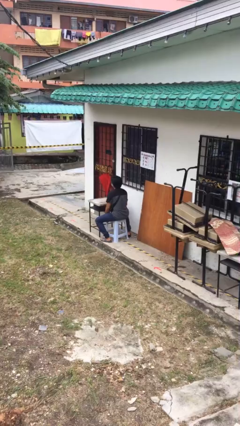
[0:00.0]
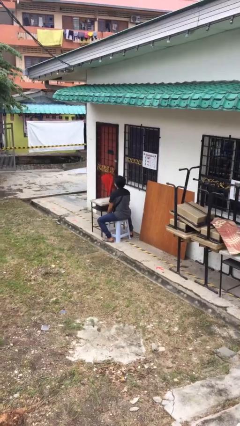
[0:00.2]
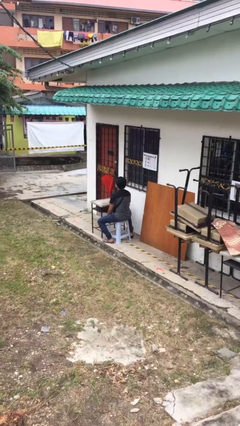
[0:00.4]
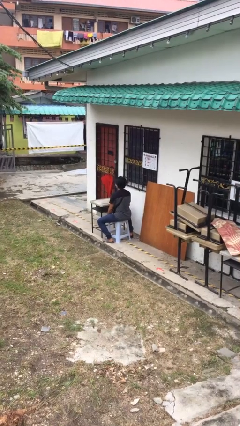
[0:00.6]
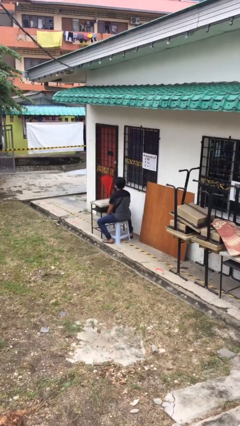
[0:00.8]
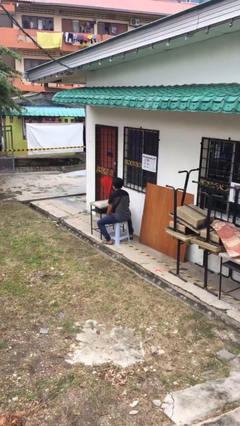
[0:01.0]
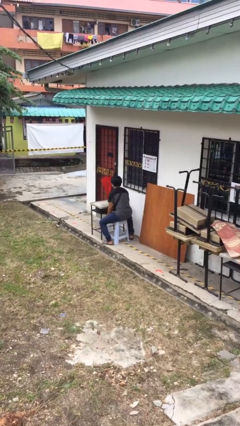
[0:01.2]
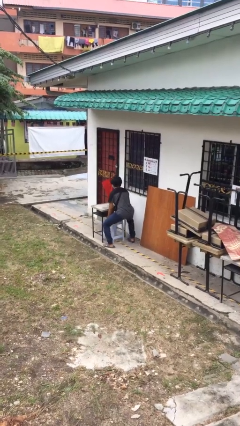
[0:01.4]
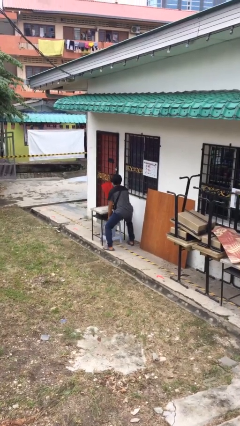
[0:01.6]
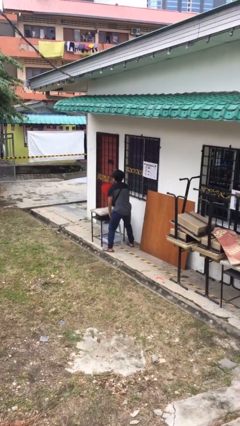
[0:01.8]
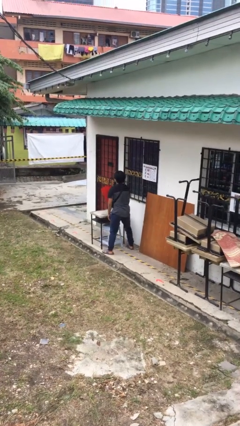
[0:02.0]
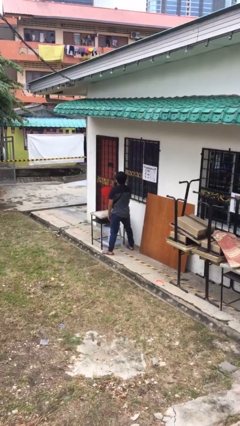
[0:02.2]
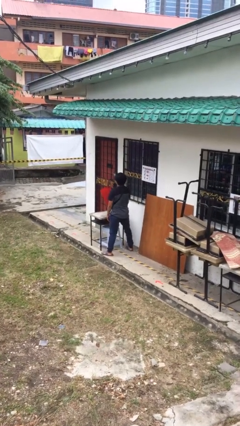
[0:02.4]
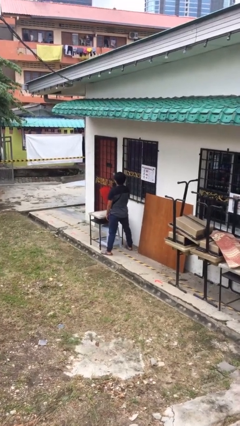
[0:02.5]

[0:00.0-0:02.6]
person stands up

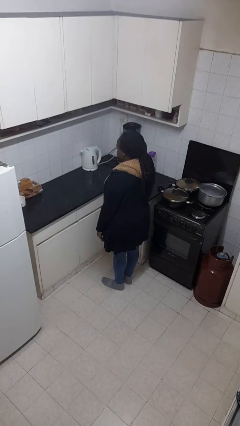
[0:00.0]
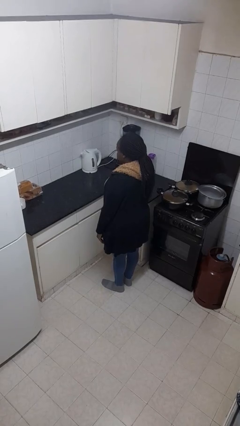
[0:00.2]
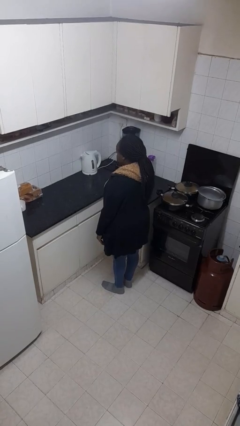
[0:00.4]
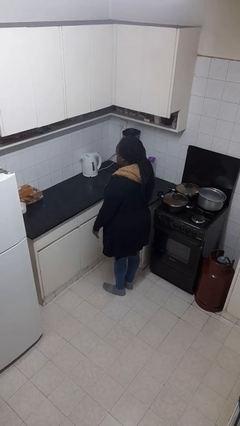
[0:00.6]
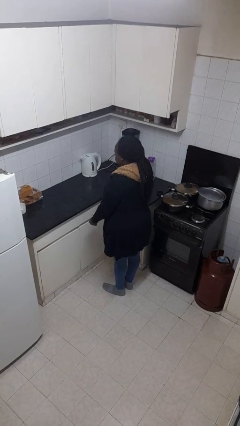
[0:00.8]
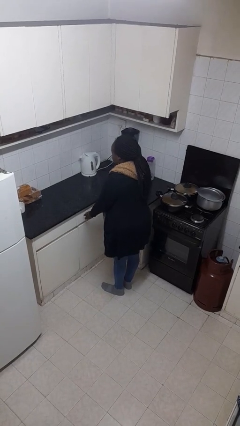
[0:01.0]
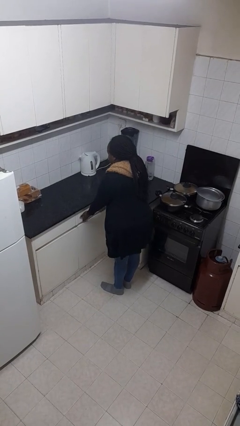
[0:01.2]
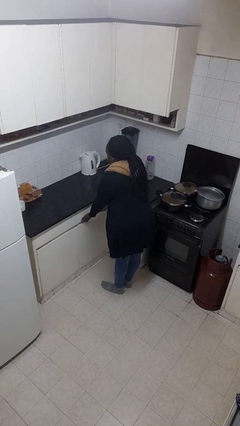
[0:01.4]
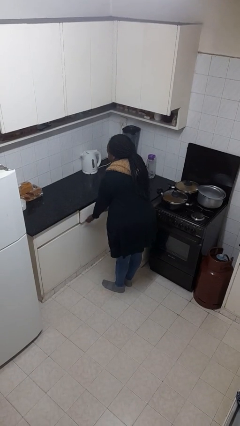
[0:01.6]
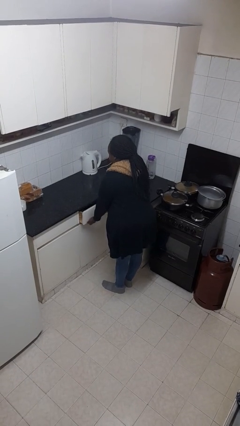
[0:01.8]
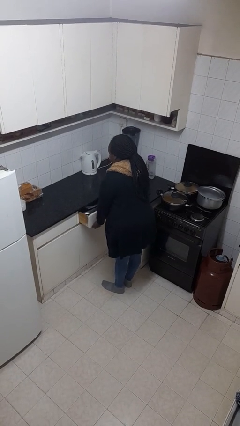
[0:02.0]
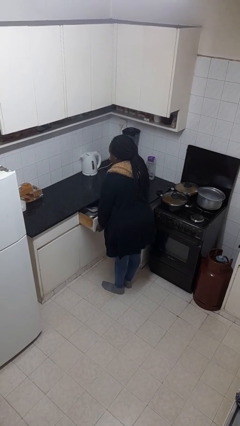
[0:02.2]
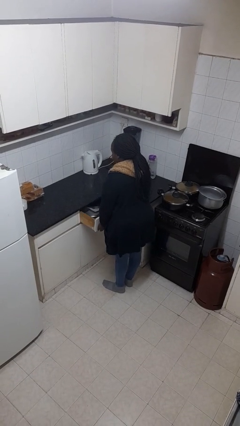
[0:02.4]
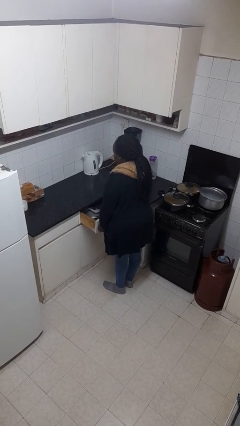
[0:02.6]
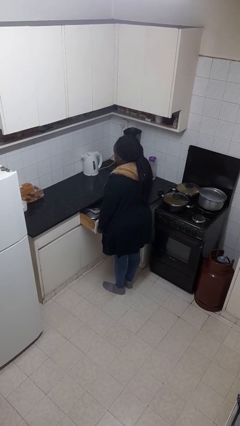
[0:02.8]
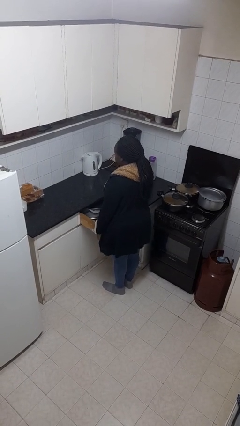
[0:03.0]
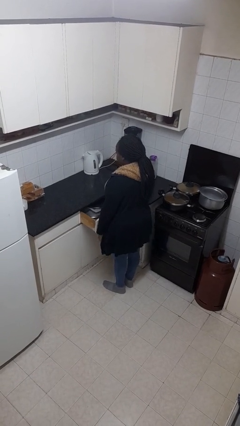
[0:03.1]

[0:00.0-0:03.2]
person opens kitchen drawer

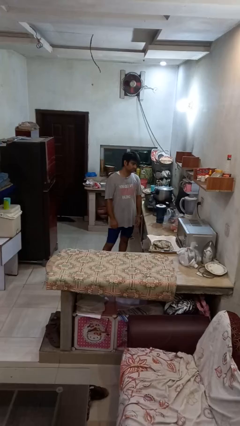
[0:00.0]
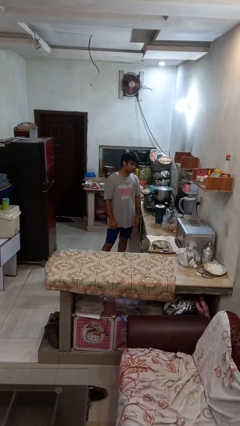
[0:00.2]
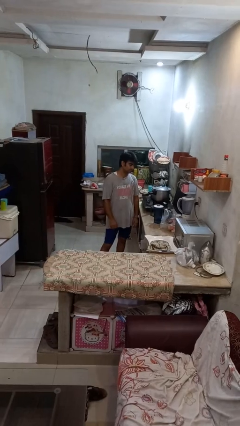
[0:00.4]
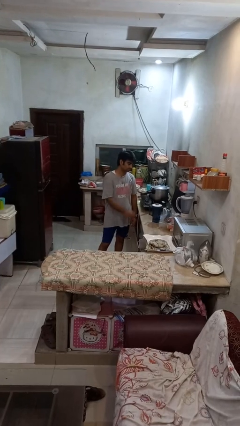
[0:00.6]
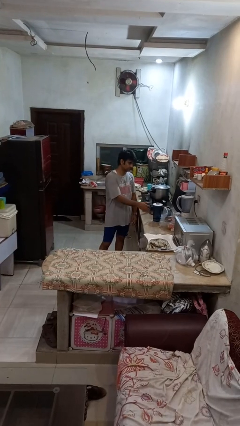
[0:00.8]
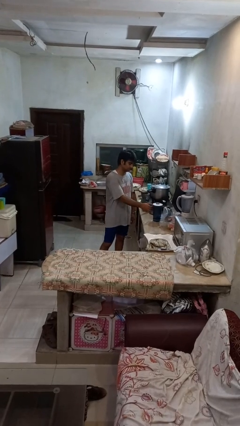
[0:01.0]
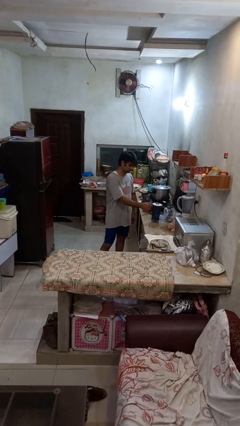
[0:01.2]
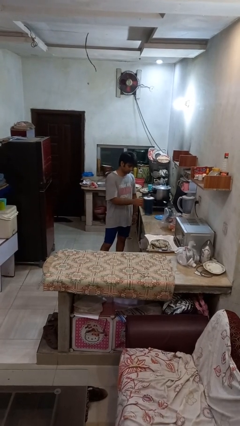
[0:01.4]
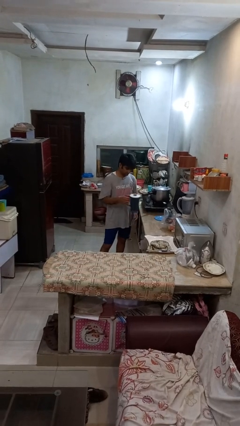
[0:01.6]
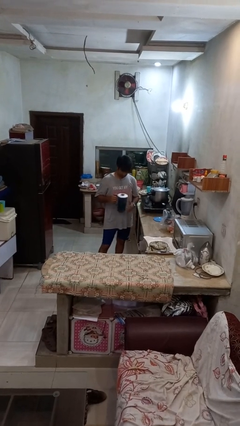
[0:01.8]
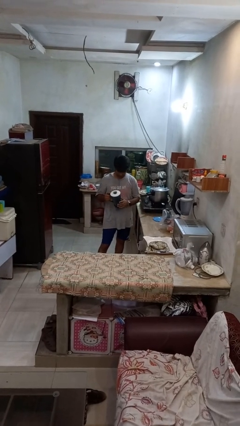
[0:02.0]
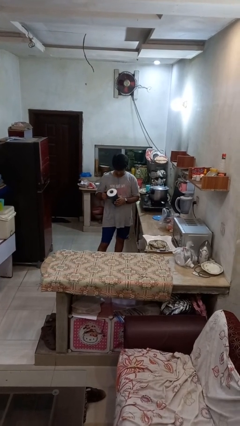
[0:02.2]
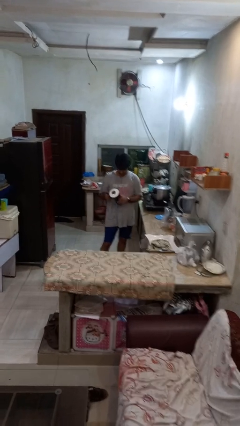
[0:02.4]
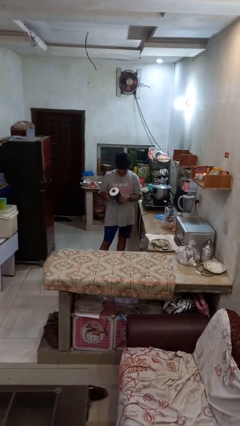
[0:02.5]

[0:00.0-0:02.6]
person picks up object from countertop

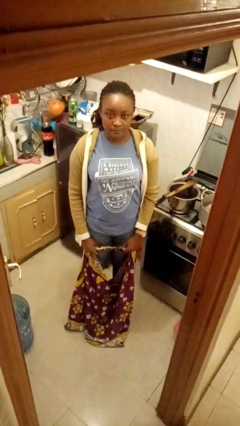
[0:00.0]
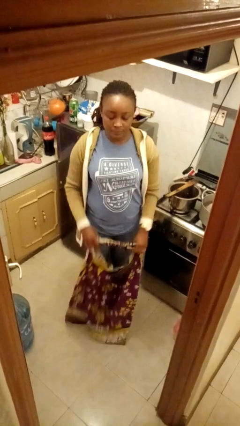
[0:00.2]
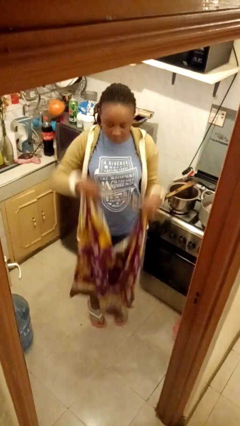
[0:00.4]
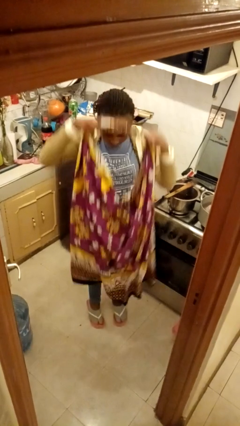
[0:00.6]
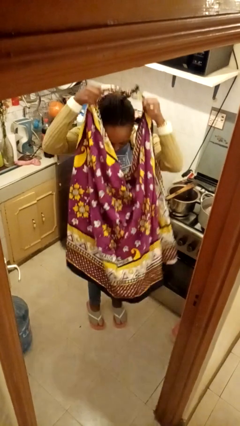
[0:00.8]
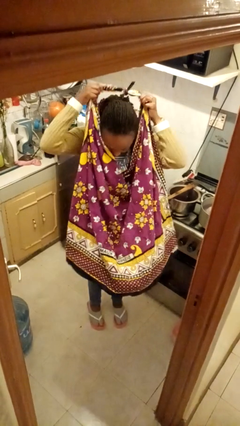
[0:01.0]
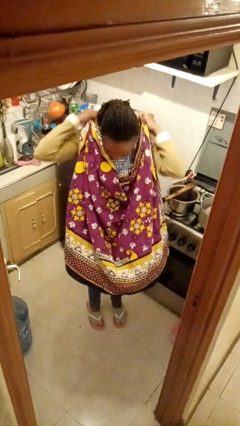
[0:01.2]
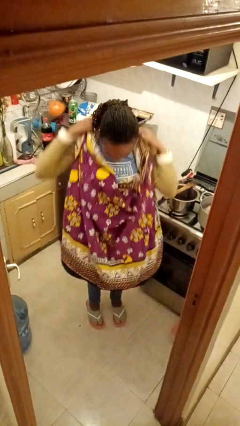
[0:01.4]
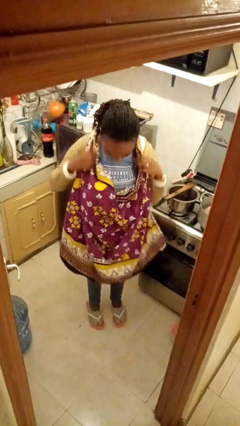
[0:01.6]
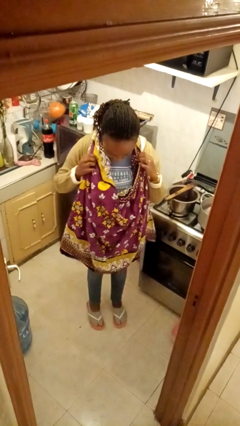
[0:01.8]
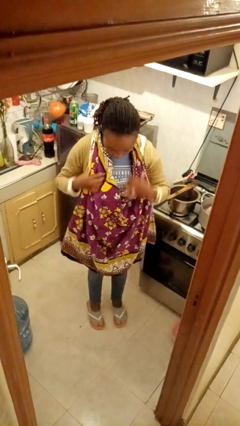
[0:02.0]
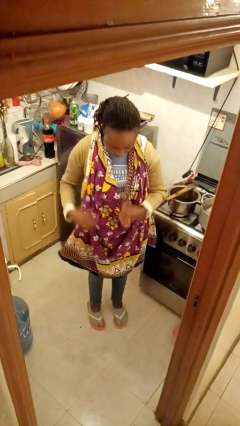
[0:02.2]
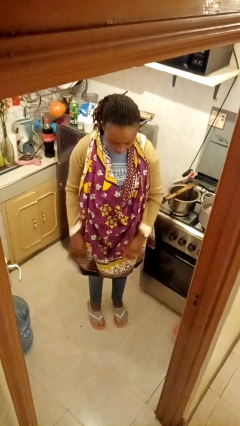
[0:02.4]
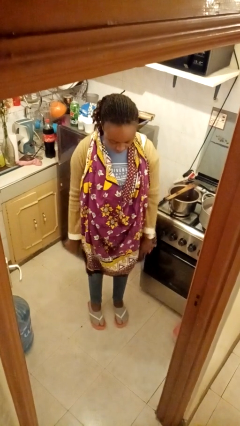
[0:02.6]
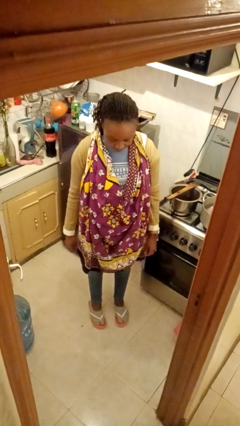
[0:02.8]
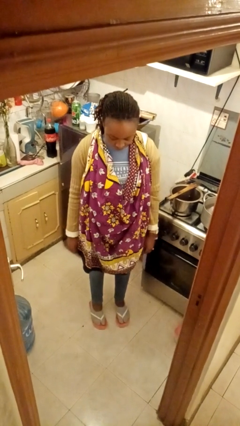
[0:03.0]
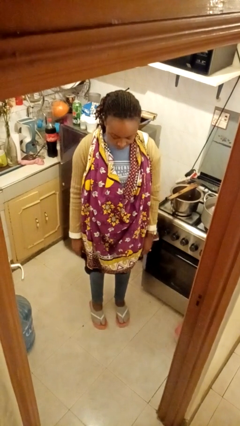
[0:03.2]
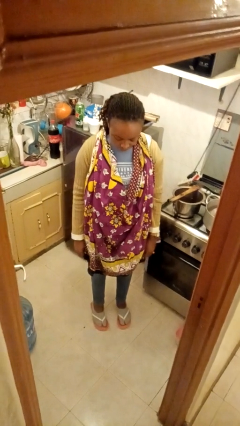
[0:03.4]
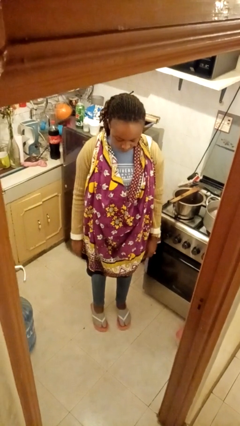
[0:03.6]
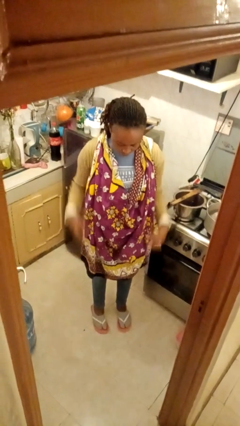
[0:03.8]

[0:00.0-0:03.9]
person puts on apron

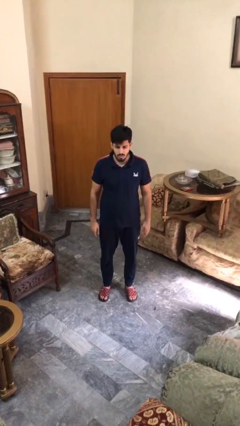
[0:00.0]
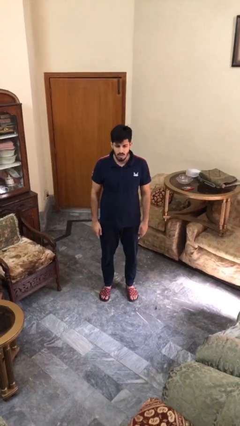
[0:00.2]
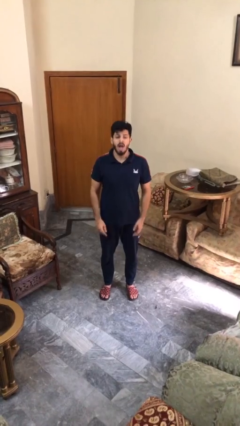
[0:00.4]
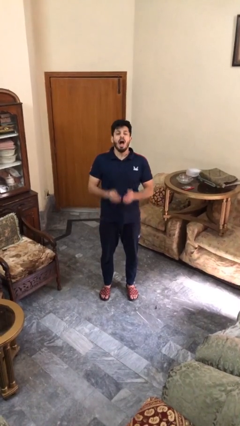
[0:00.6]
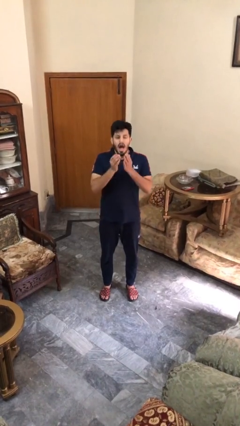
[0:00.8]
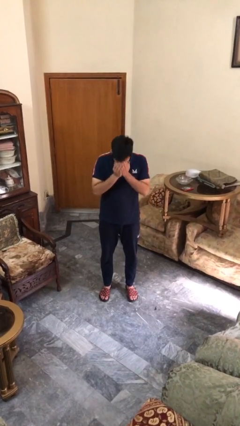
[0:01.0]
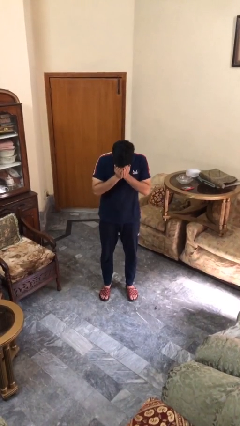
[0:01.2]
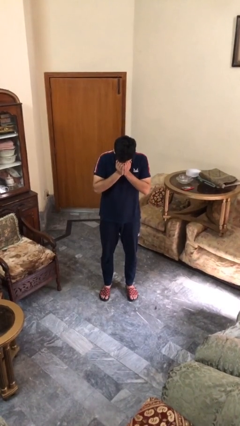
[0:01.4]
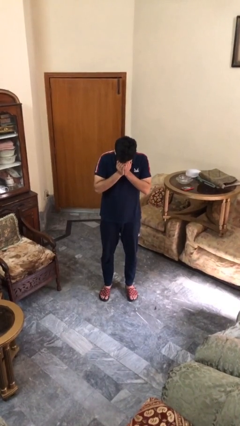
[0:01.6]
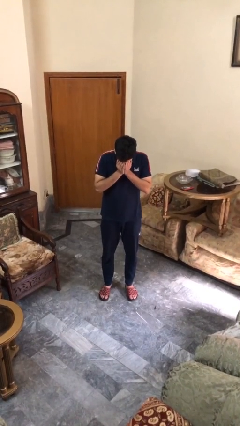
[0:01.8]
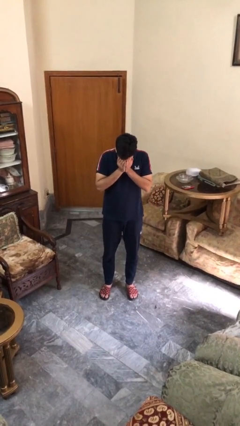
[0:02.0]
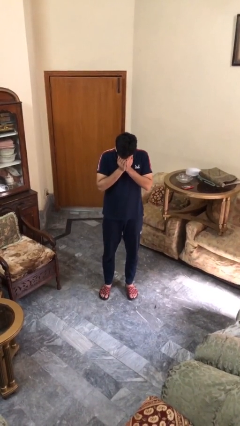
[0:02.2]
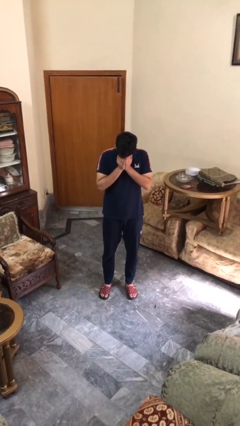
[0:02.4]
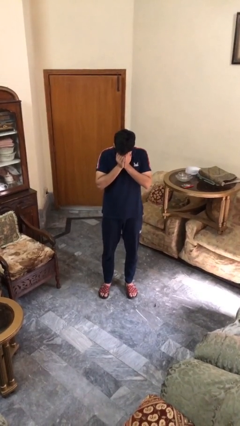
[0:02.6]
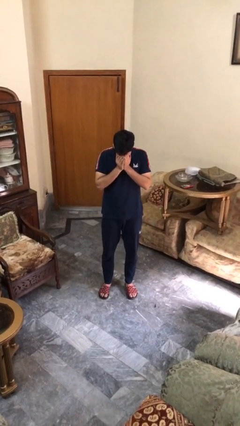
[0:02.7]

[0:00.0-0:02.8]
person sneezes into hand

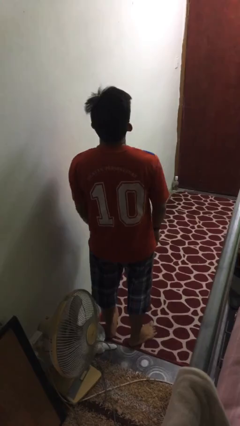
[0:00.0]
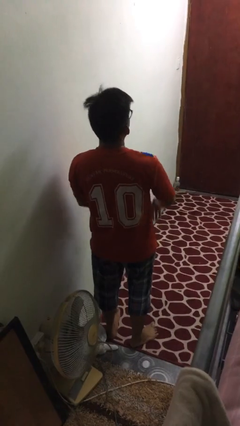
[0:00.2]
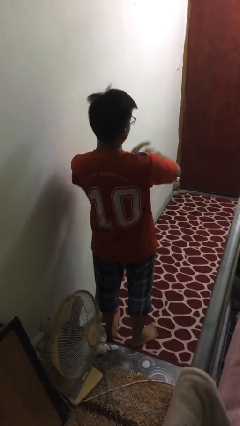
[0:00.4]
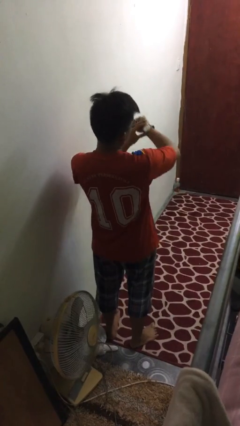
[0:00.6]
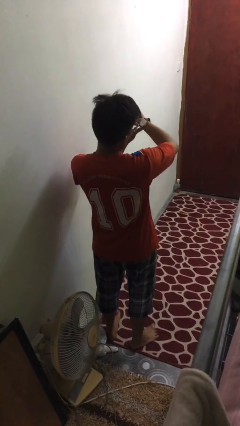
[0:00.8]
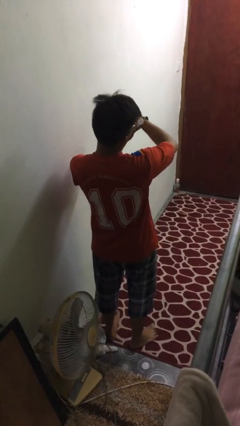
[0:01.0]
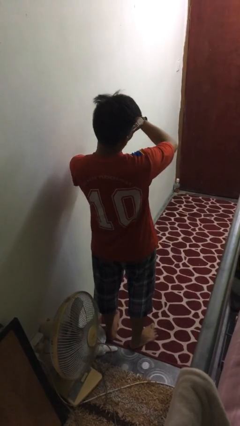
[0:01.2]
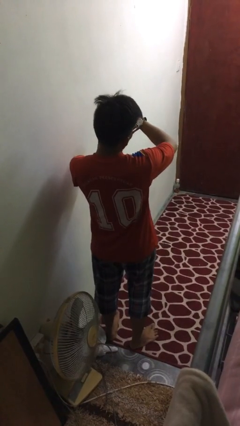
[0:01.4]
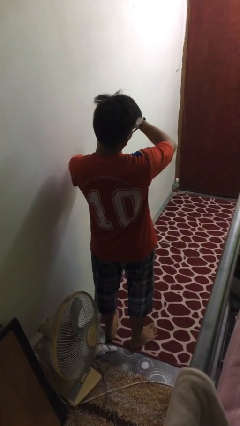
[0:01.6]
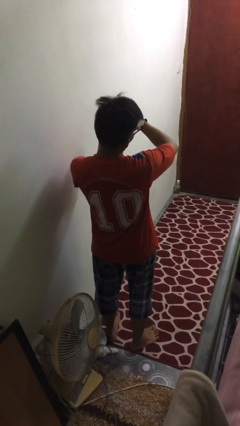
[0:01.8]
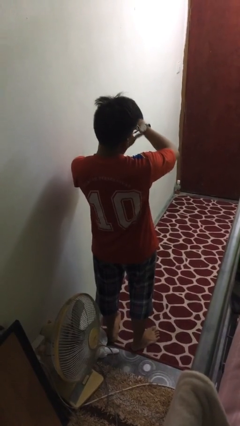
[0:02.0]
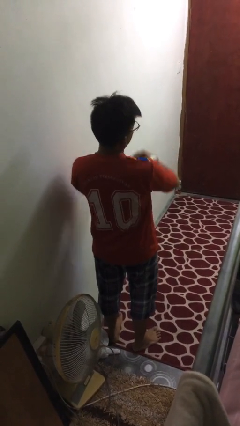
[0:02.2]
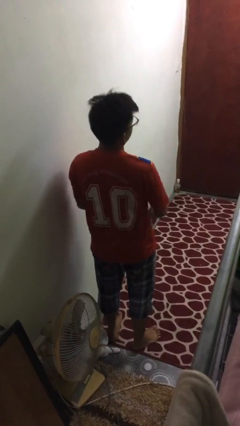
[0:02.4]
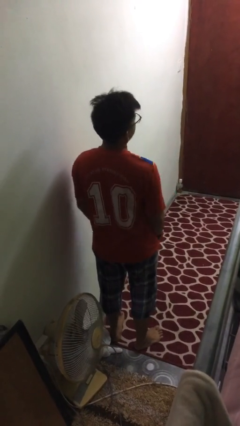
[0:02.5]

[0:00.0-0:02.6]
person looks at wristwatch
